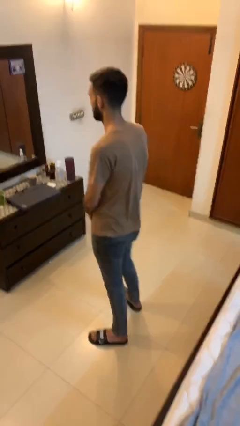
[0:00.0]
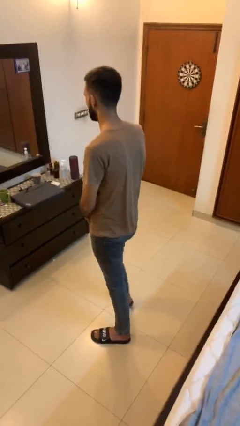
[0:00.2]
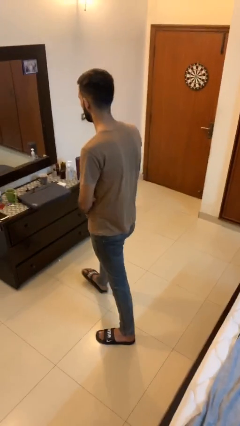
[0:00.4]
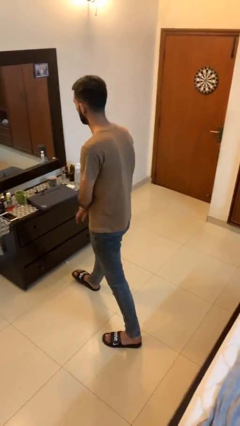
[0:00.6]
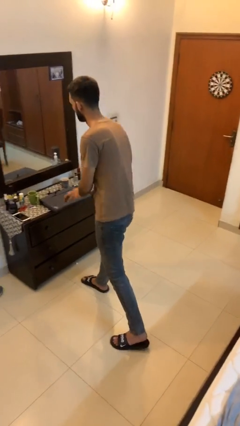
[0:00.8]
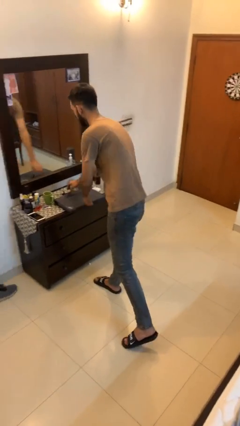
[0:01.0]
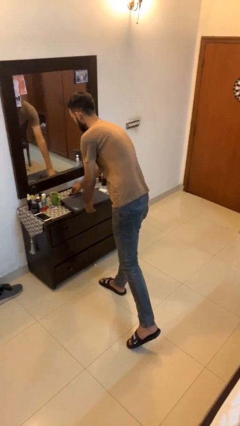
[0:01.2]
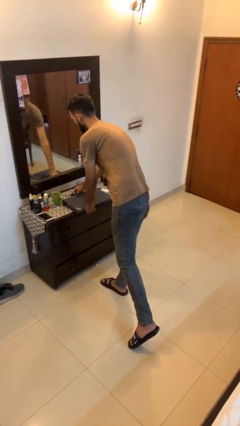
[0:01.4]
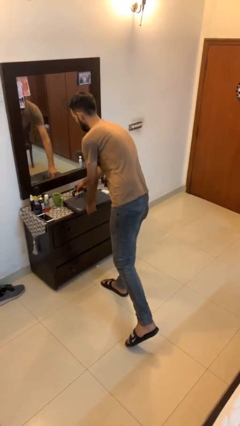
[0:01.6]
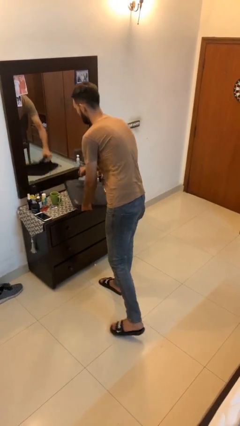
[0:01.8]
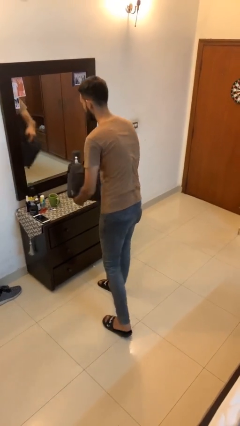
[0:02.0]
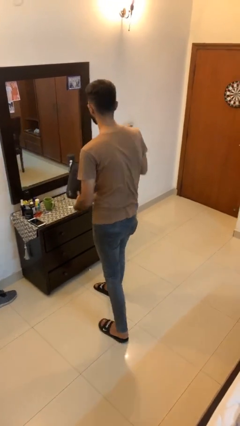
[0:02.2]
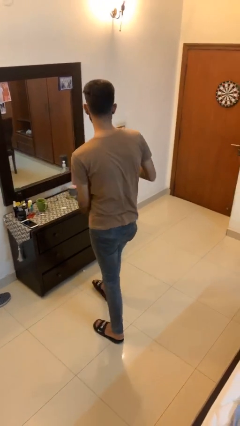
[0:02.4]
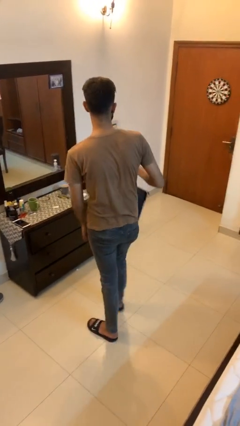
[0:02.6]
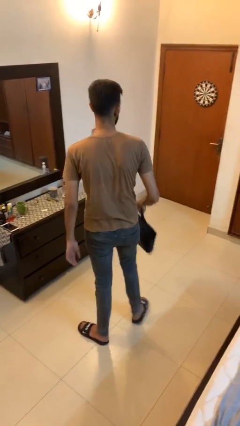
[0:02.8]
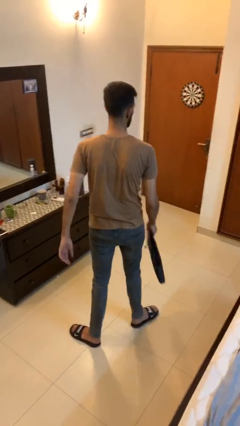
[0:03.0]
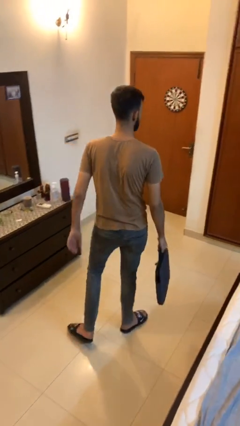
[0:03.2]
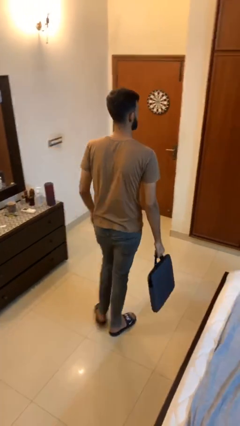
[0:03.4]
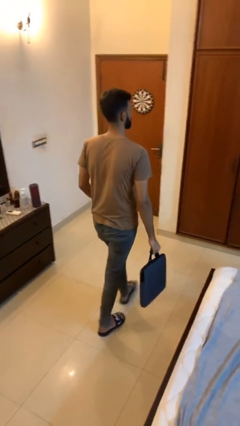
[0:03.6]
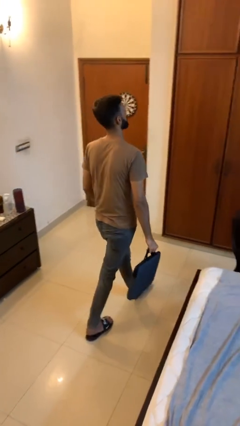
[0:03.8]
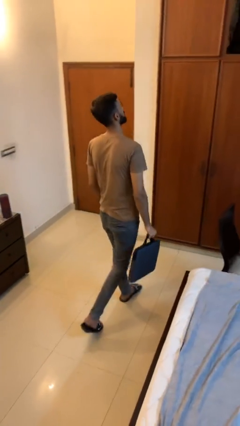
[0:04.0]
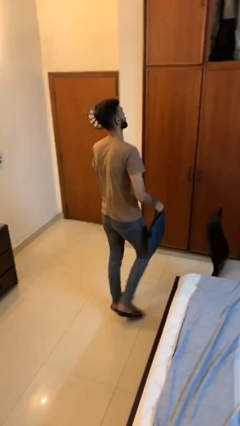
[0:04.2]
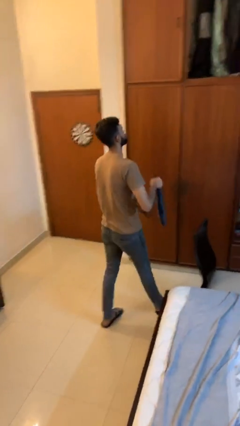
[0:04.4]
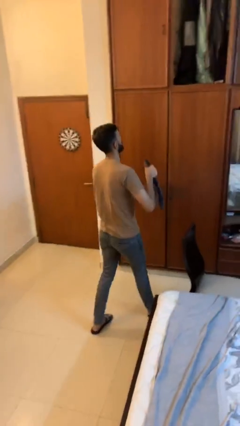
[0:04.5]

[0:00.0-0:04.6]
person picks up object from table

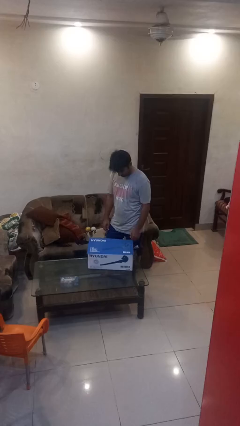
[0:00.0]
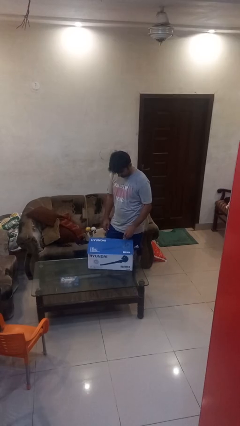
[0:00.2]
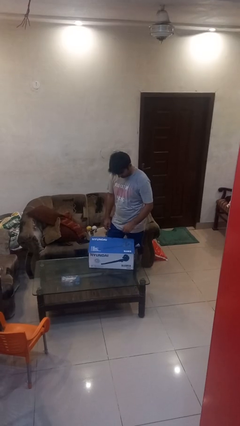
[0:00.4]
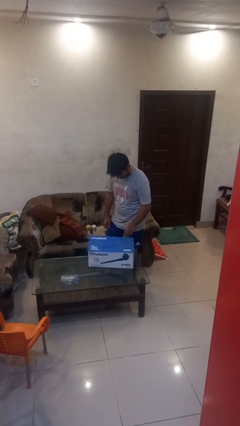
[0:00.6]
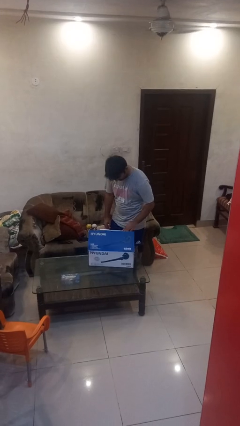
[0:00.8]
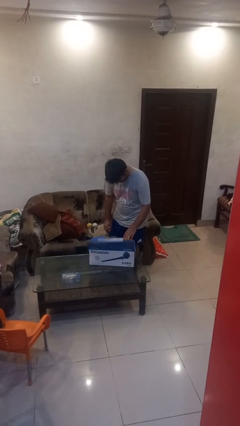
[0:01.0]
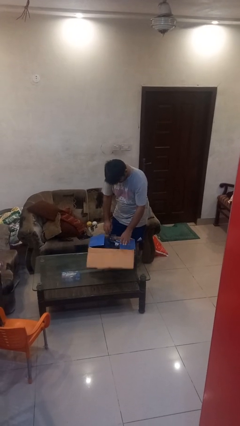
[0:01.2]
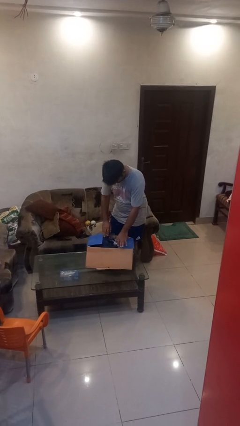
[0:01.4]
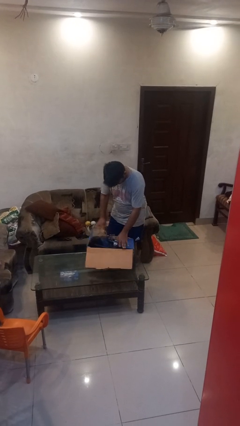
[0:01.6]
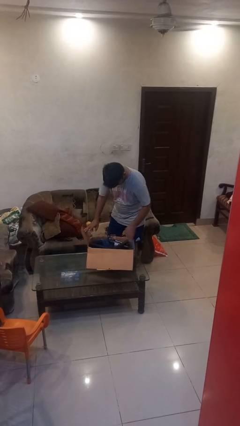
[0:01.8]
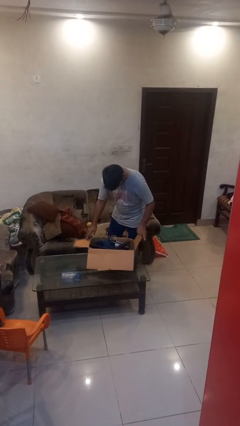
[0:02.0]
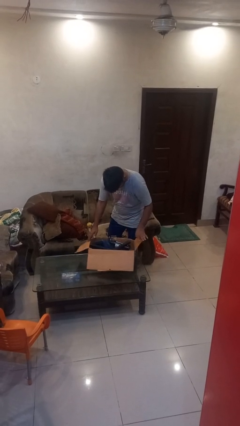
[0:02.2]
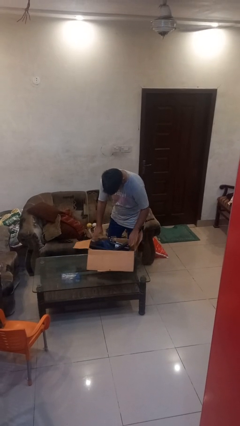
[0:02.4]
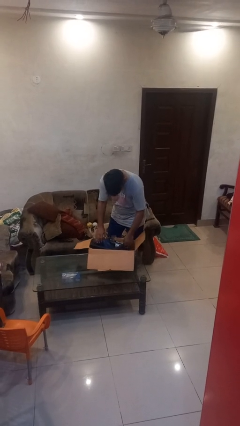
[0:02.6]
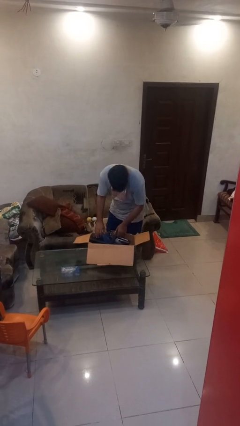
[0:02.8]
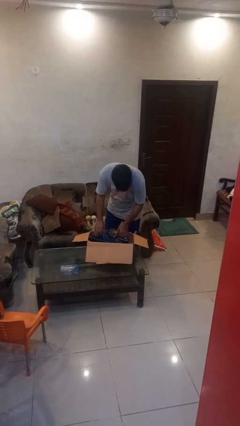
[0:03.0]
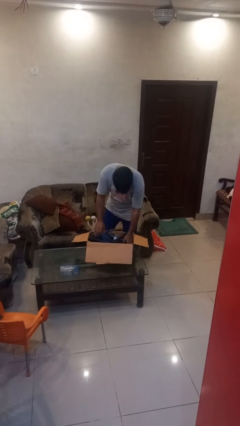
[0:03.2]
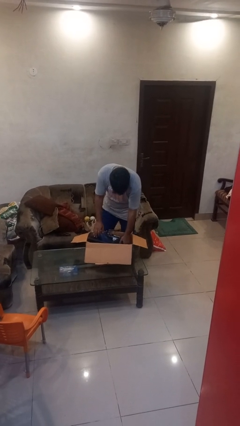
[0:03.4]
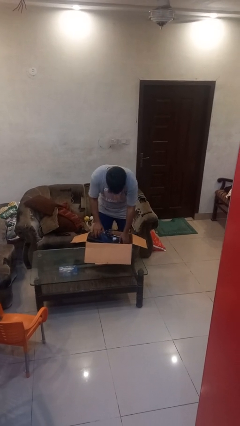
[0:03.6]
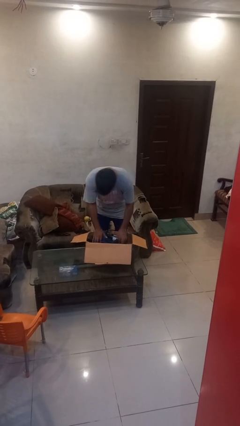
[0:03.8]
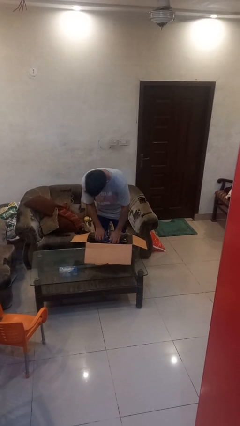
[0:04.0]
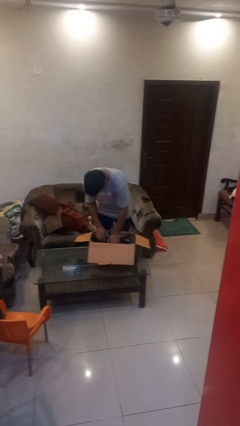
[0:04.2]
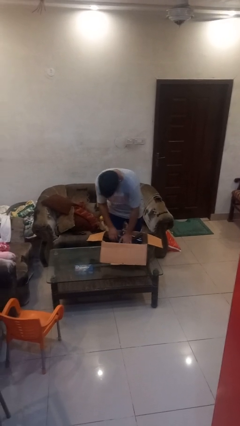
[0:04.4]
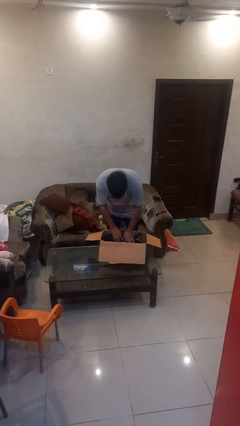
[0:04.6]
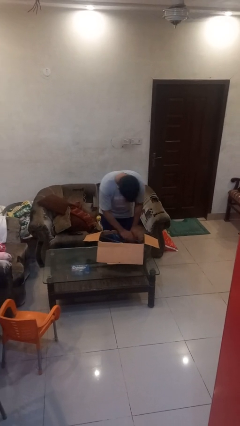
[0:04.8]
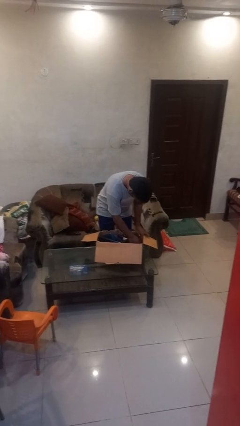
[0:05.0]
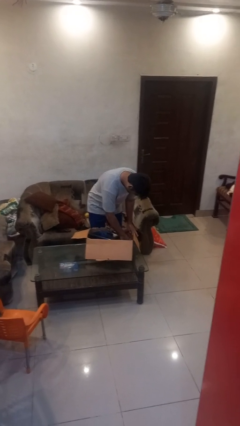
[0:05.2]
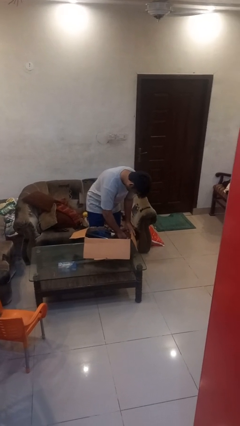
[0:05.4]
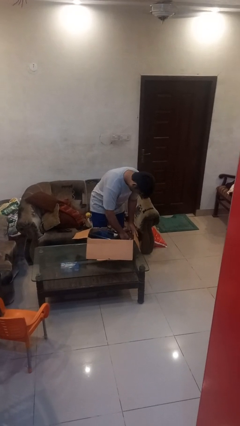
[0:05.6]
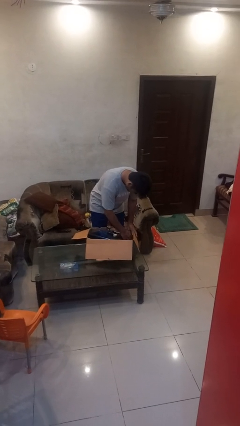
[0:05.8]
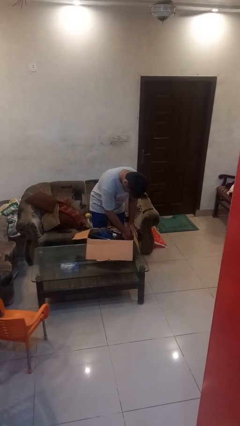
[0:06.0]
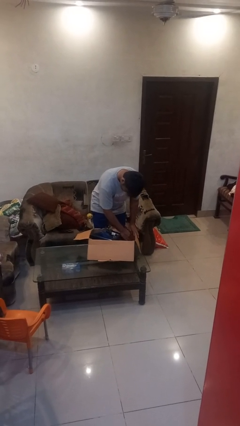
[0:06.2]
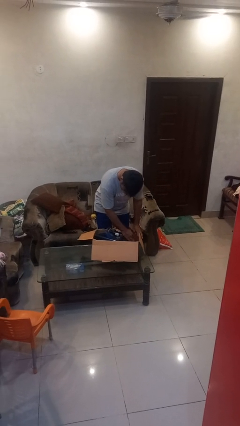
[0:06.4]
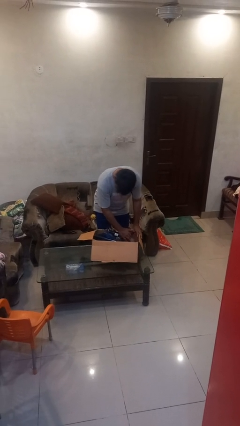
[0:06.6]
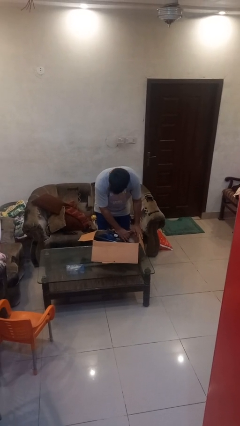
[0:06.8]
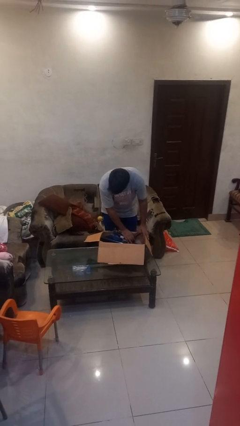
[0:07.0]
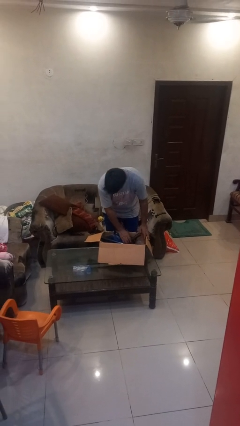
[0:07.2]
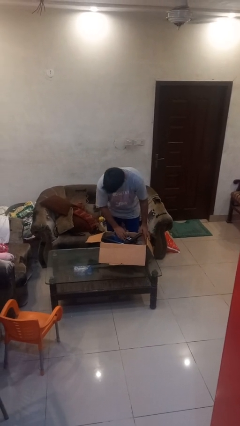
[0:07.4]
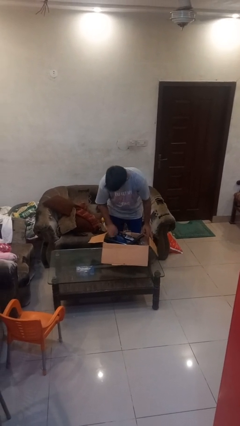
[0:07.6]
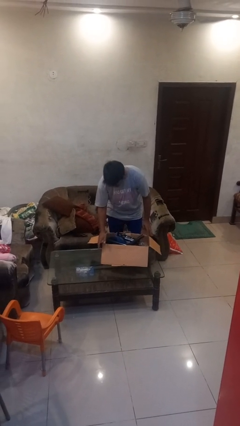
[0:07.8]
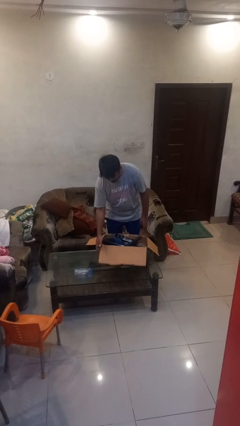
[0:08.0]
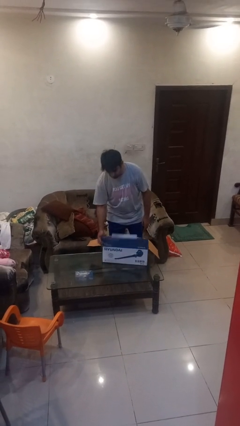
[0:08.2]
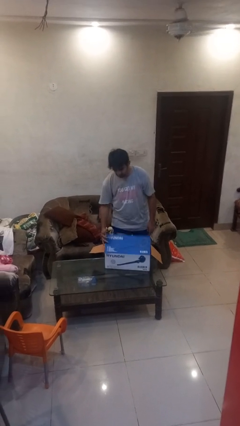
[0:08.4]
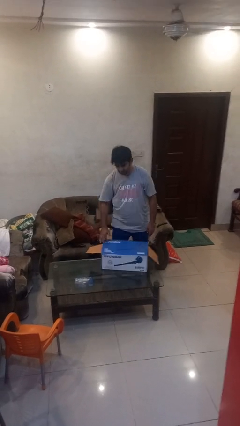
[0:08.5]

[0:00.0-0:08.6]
person searches in box

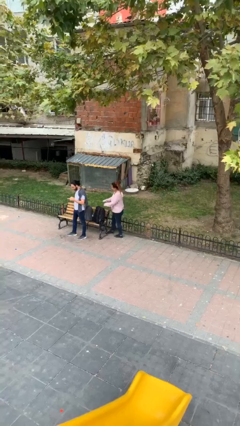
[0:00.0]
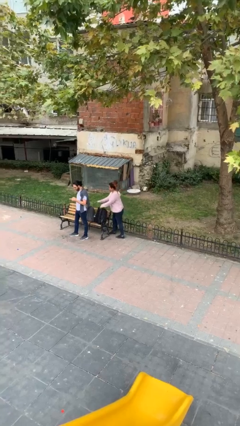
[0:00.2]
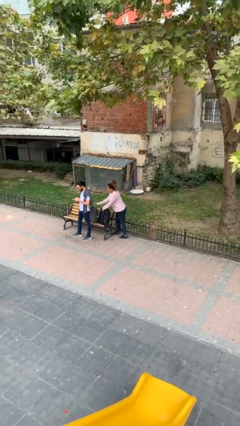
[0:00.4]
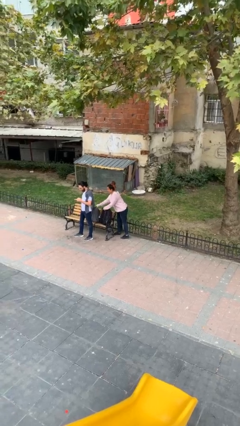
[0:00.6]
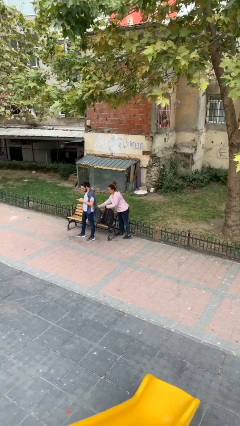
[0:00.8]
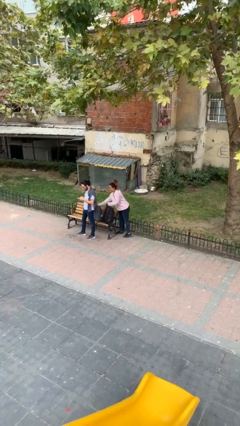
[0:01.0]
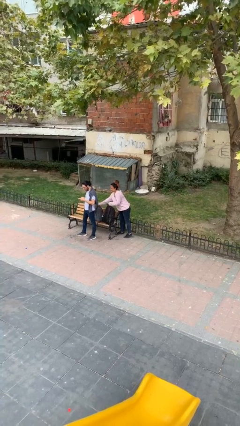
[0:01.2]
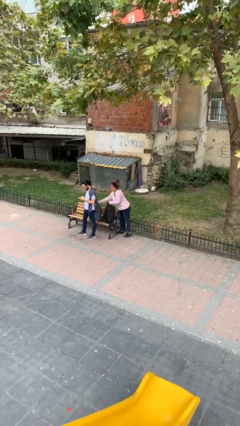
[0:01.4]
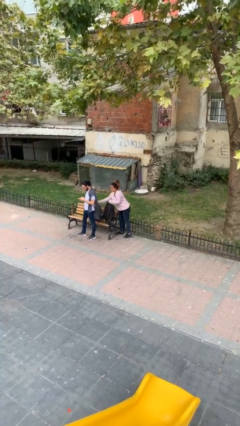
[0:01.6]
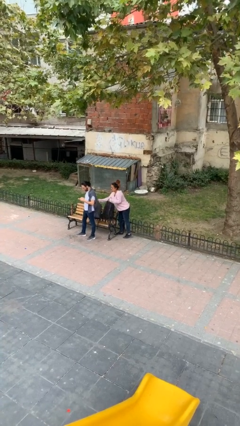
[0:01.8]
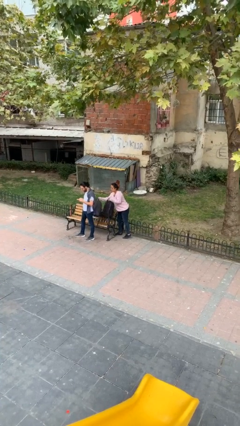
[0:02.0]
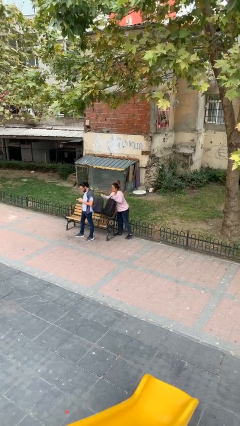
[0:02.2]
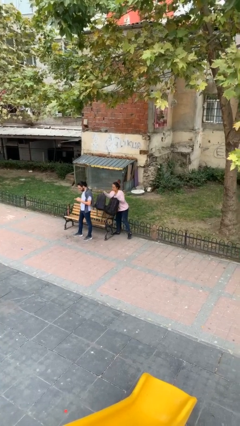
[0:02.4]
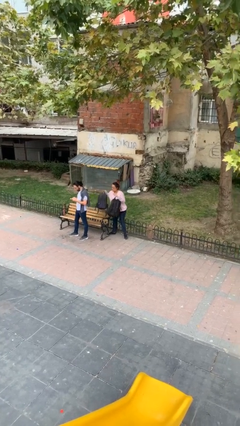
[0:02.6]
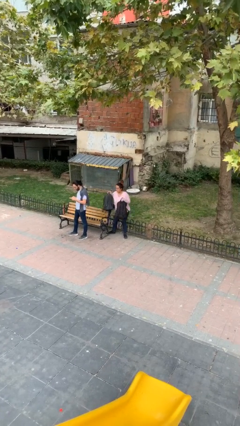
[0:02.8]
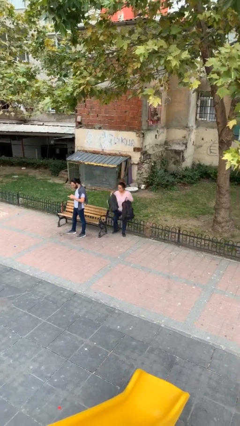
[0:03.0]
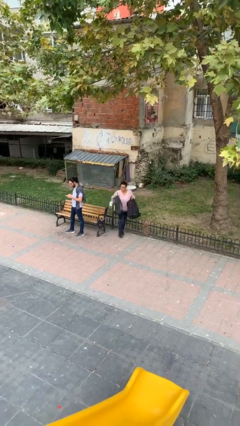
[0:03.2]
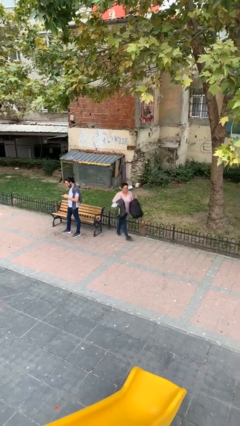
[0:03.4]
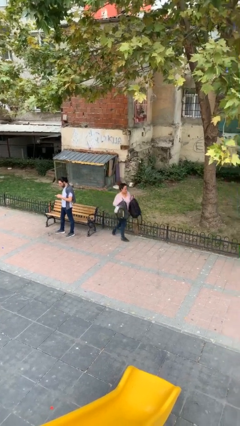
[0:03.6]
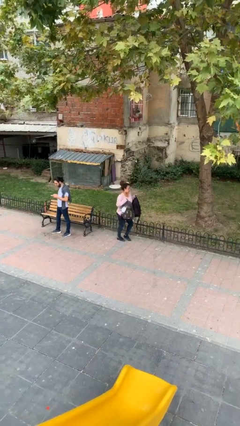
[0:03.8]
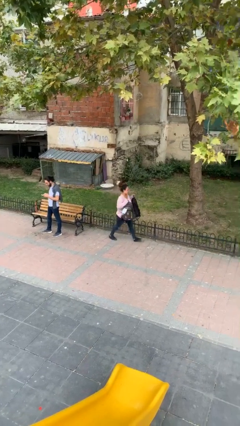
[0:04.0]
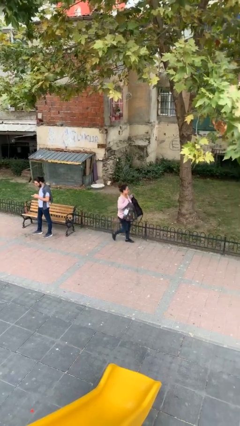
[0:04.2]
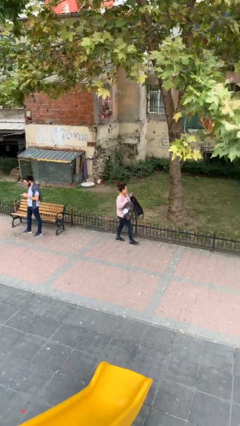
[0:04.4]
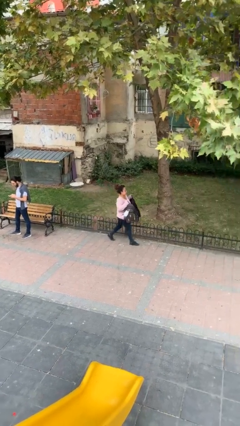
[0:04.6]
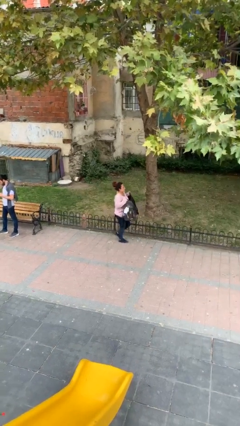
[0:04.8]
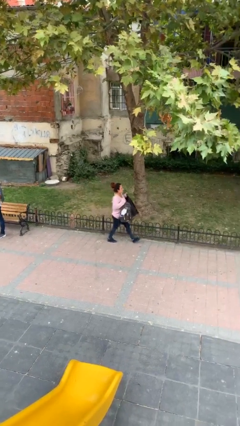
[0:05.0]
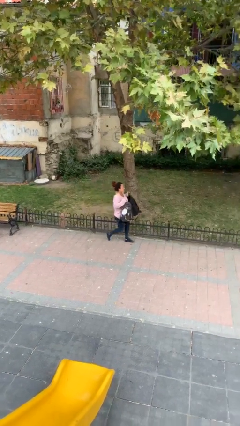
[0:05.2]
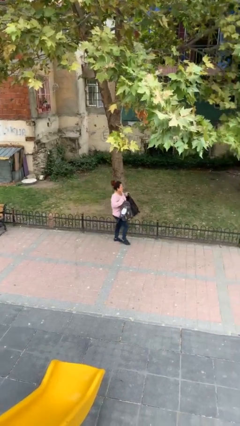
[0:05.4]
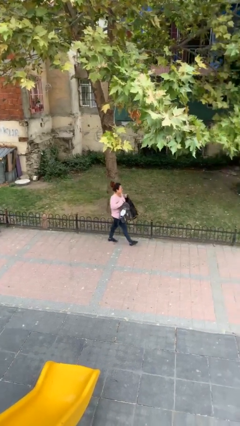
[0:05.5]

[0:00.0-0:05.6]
person steals object from person
